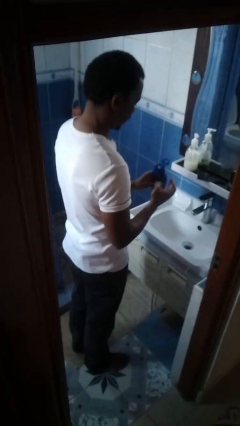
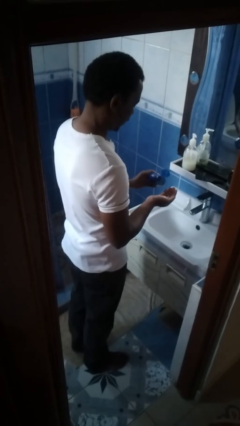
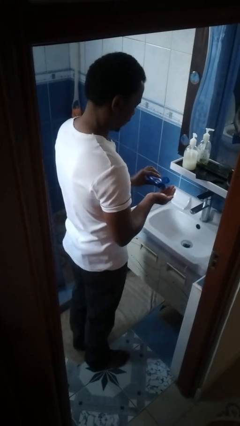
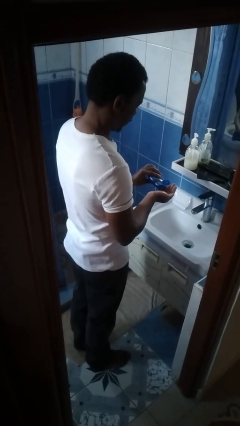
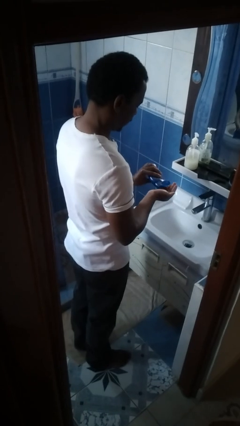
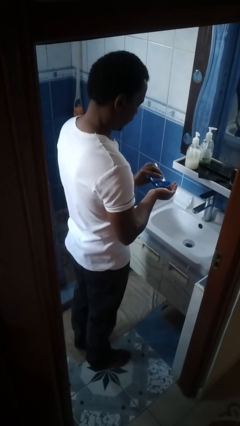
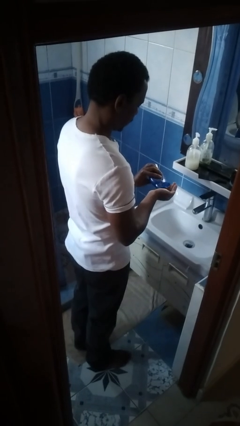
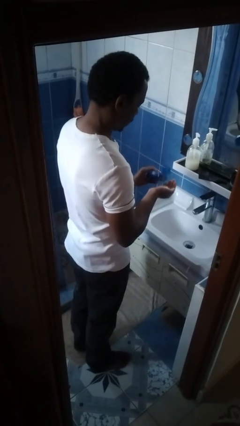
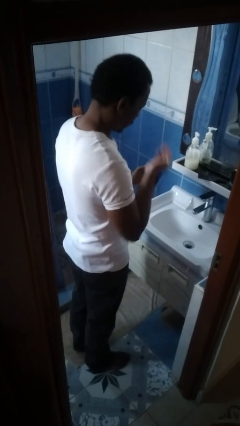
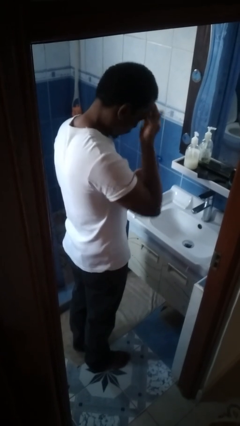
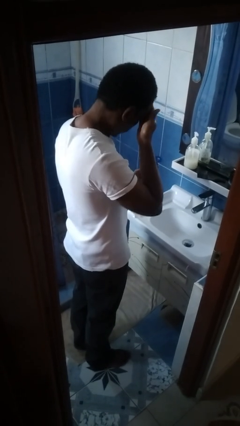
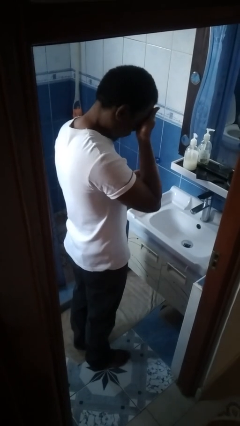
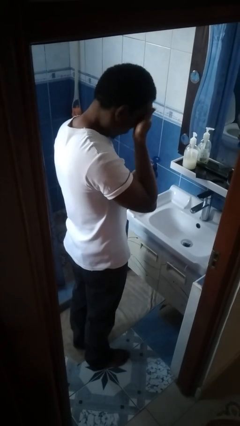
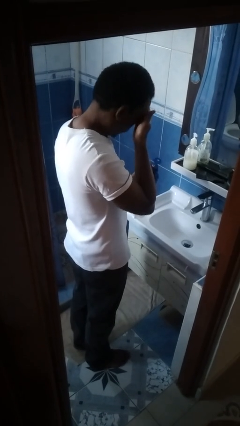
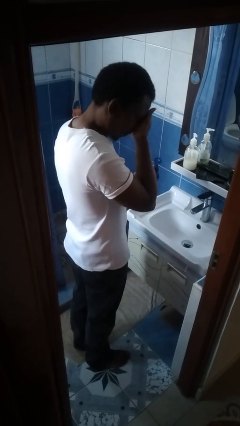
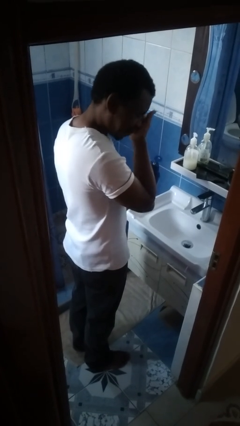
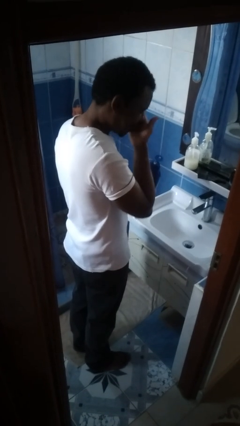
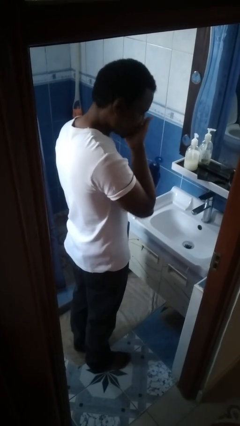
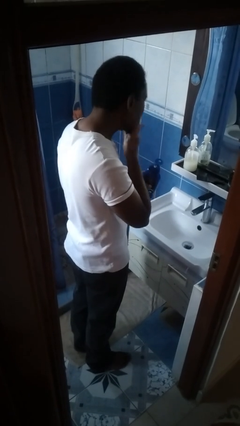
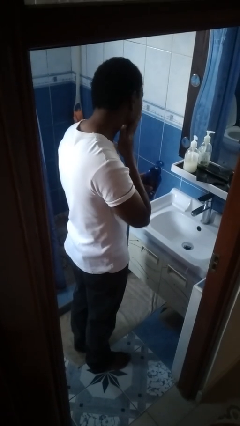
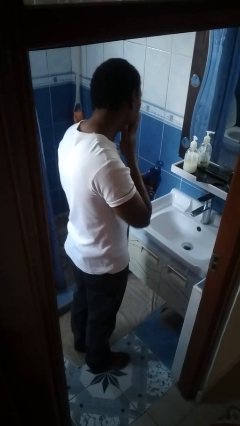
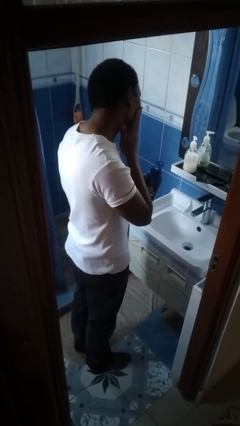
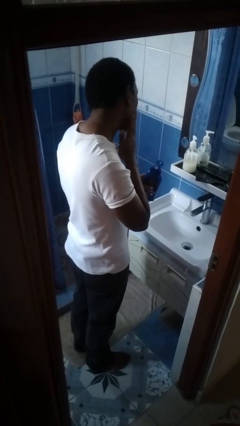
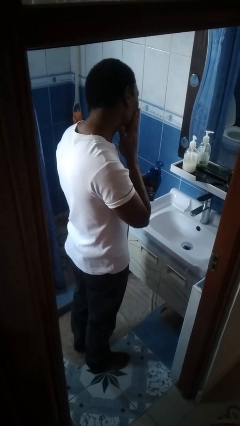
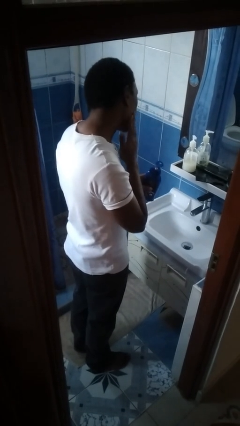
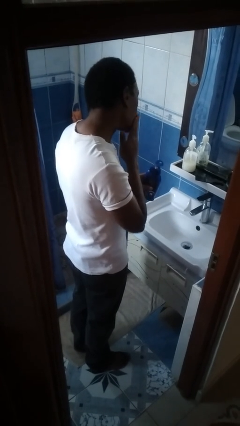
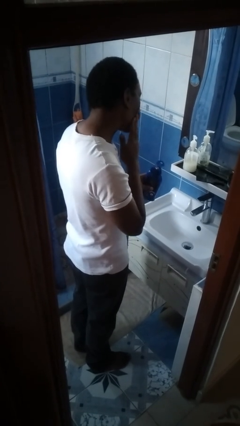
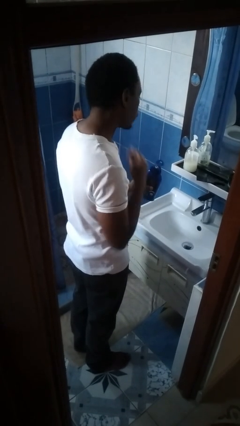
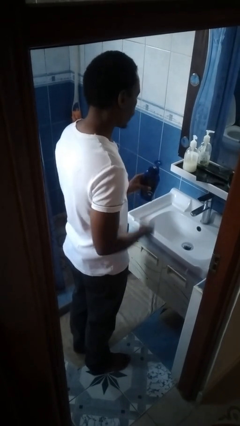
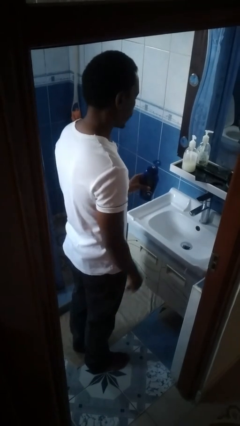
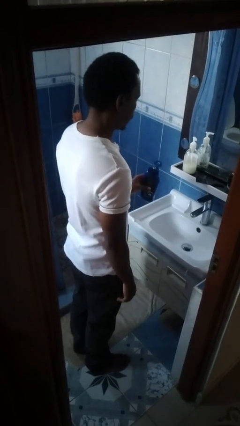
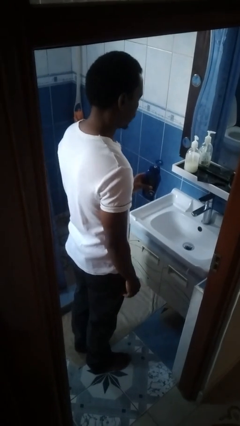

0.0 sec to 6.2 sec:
person applies facial moisturizer

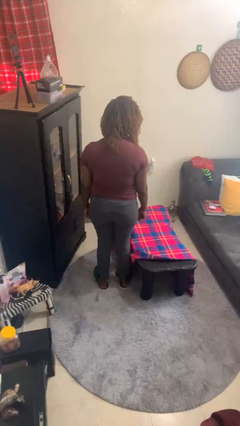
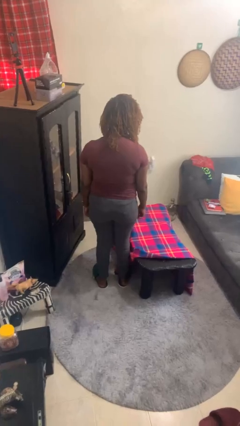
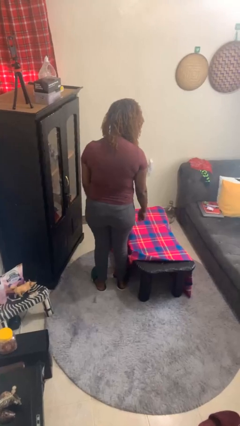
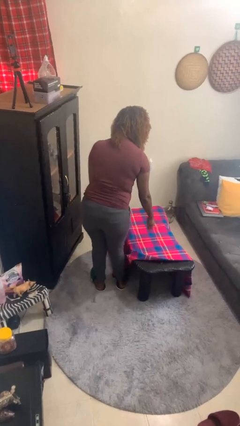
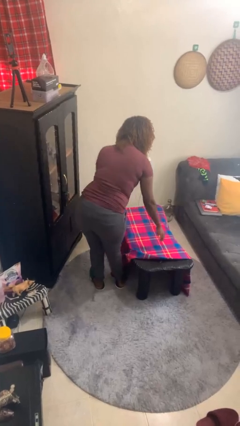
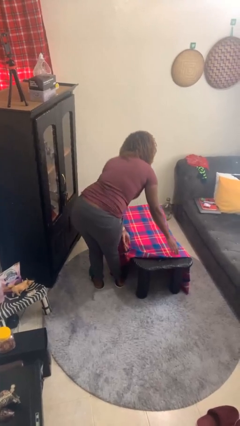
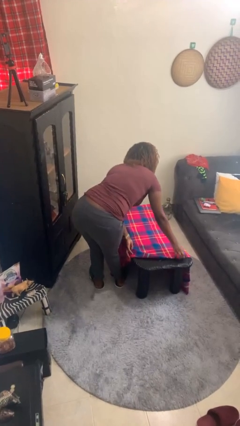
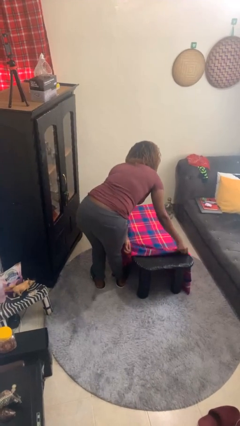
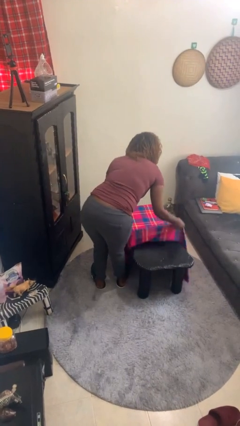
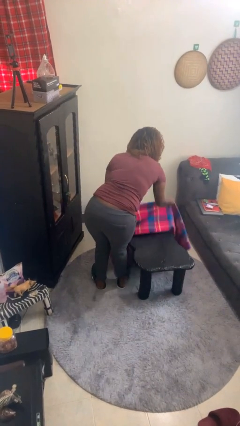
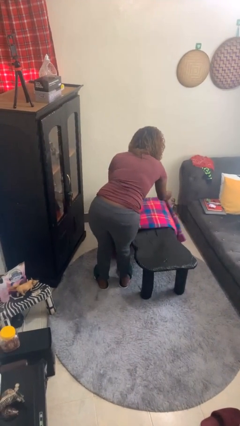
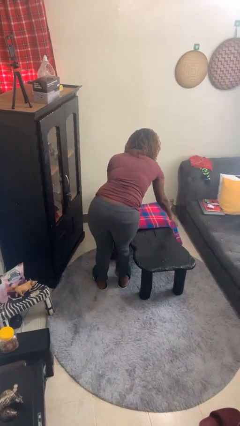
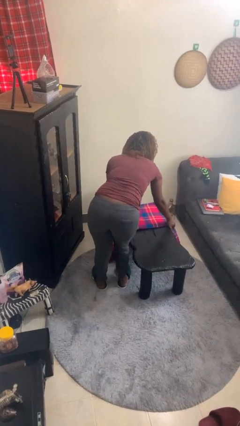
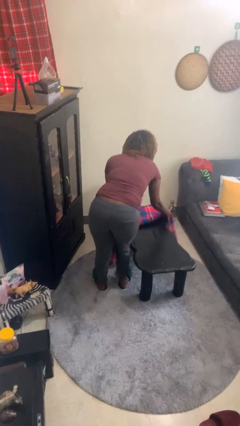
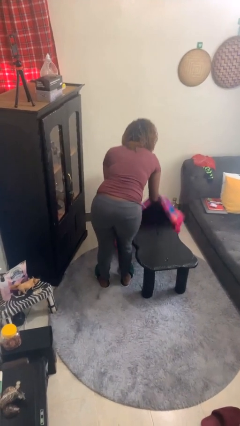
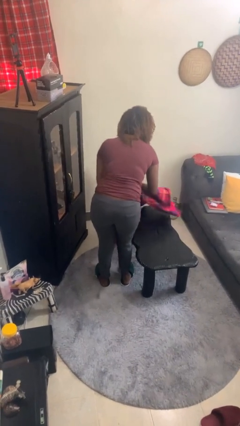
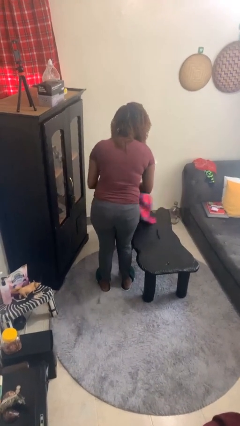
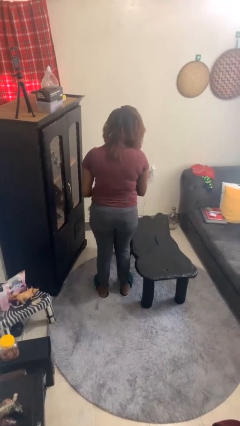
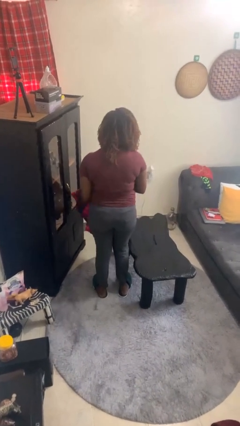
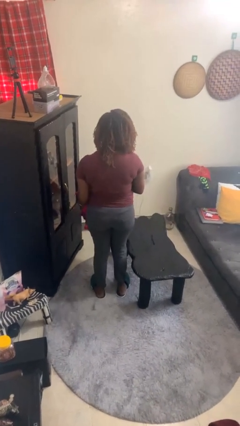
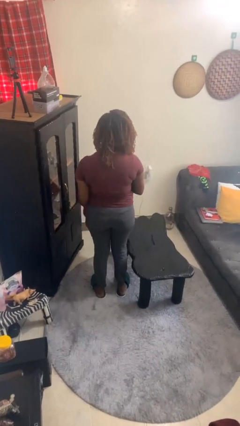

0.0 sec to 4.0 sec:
person folds tablecloth

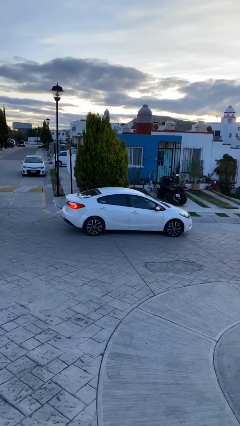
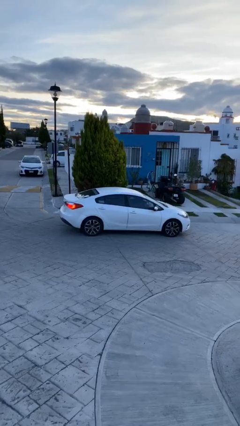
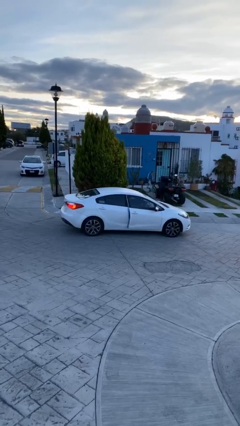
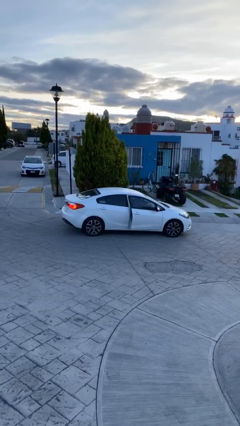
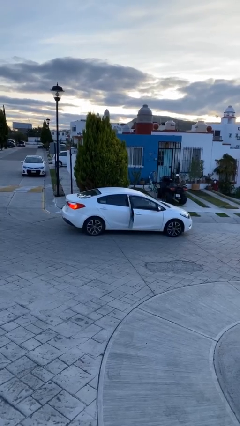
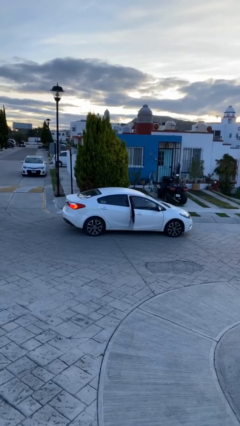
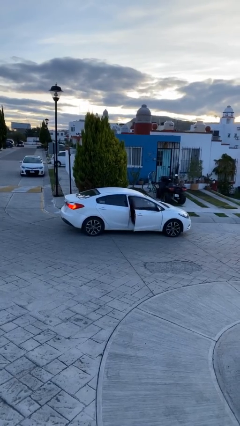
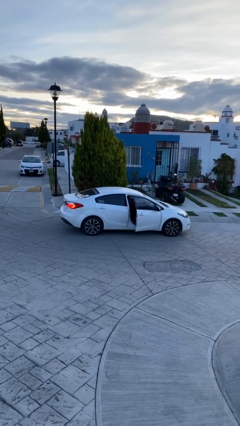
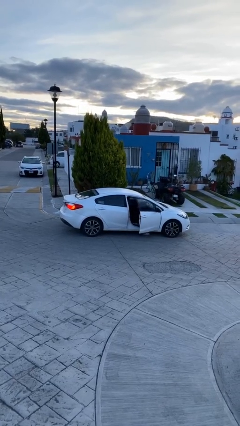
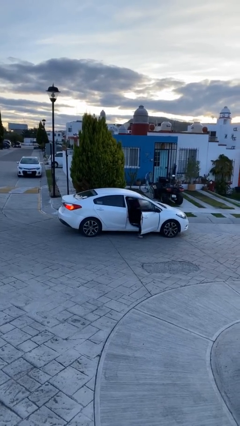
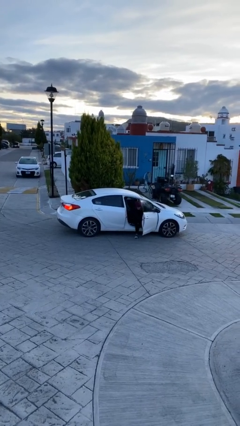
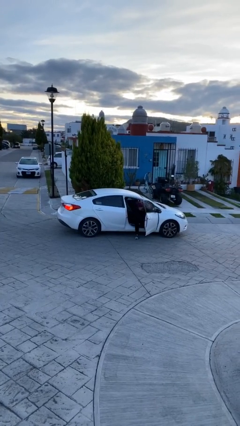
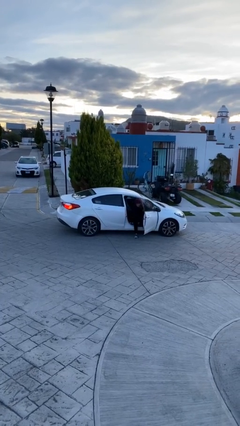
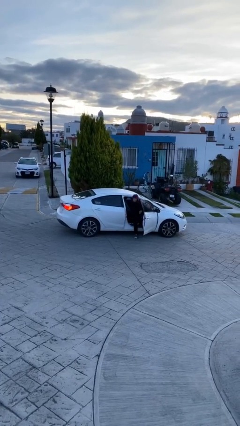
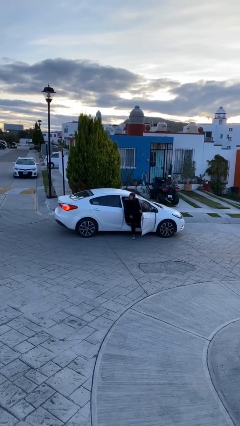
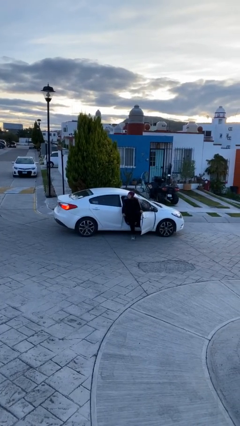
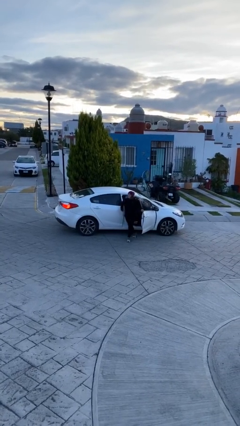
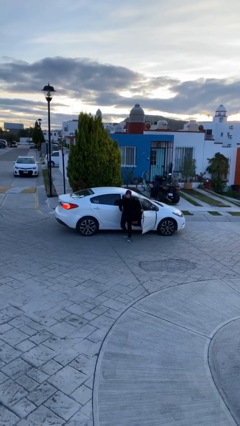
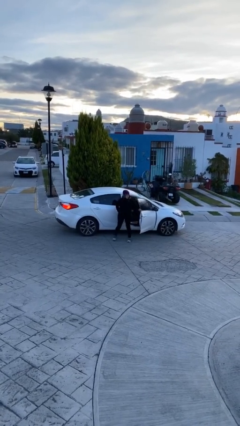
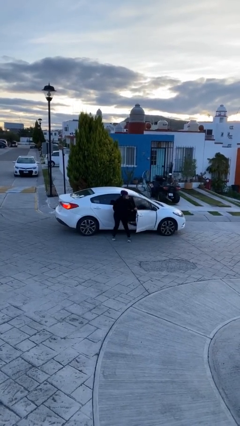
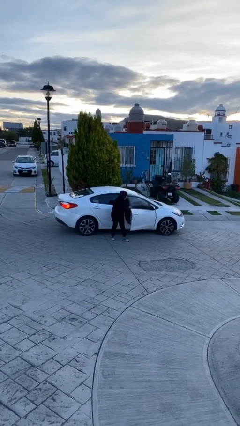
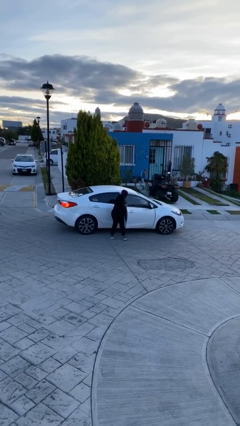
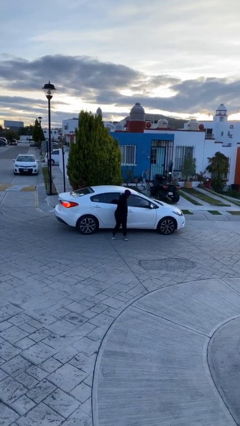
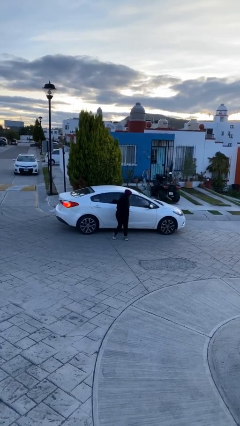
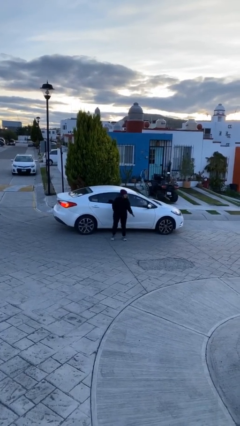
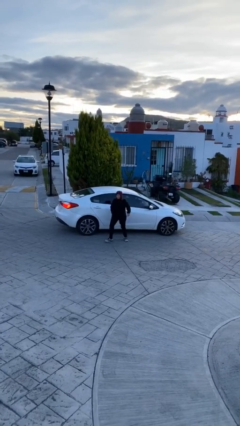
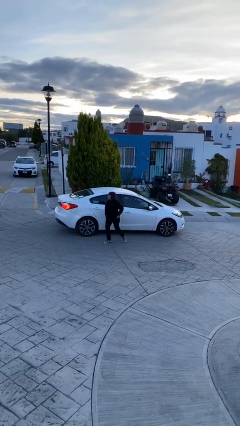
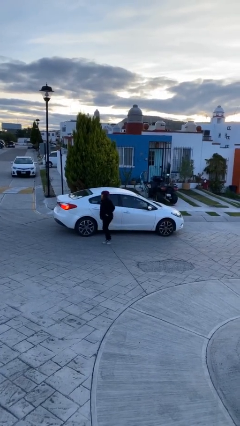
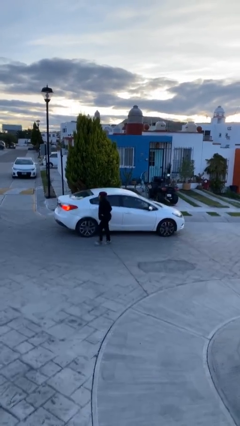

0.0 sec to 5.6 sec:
car drops off person

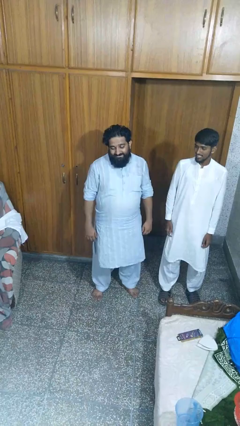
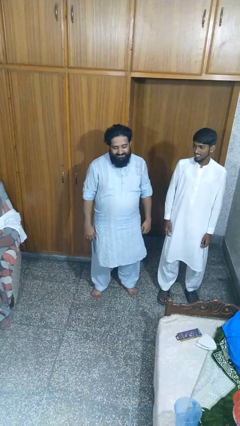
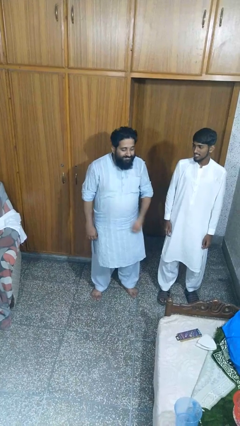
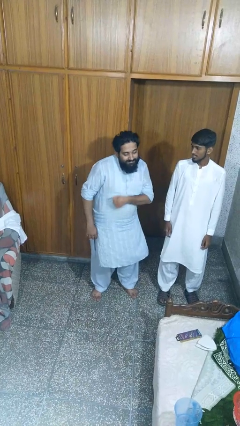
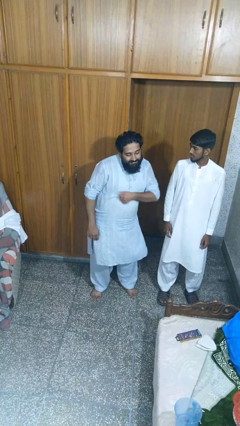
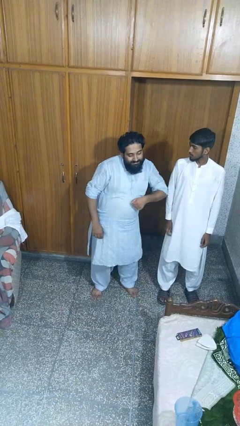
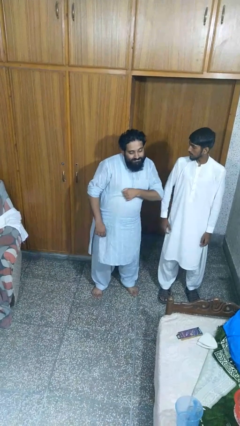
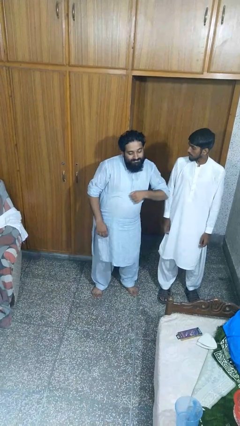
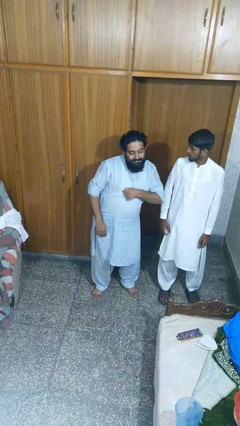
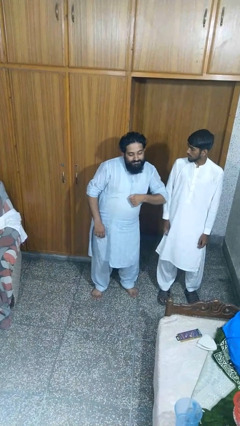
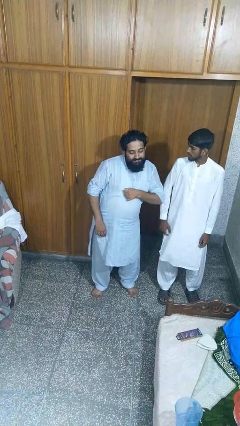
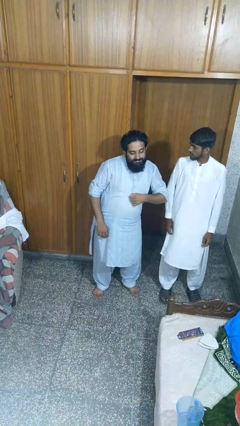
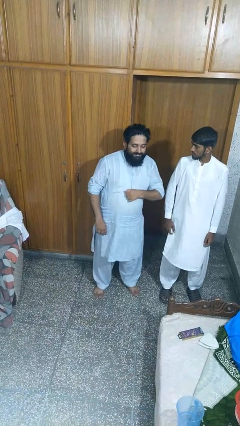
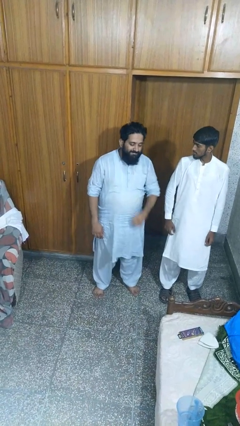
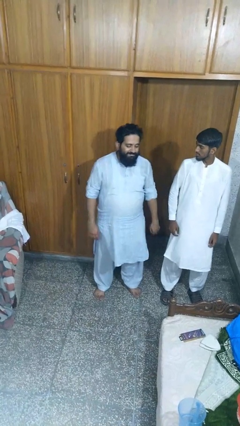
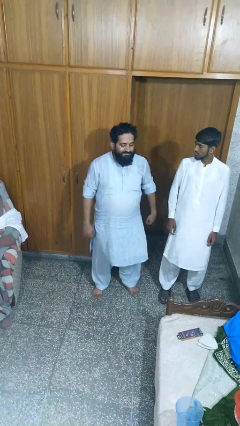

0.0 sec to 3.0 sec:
person nudges person with elbow
